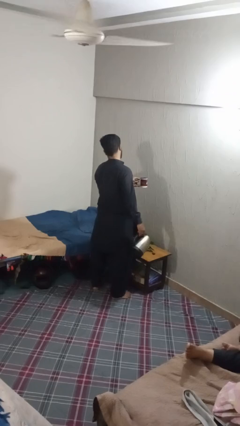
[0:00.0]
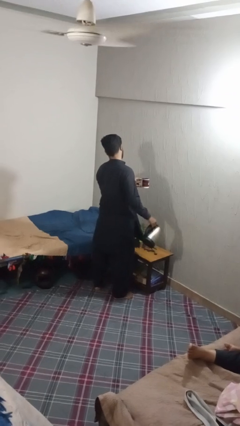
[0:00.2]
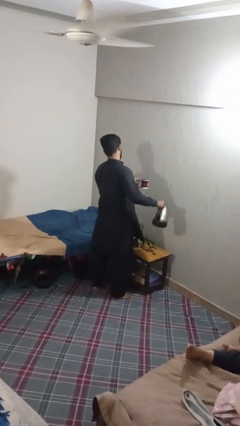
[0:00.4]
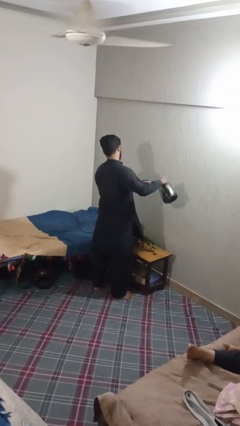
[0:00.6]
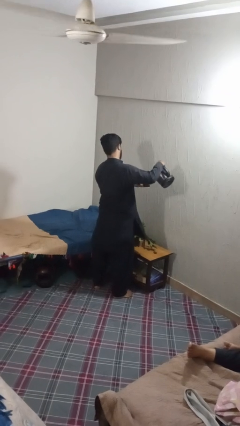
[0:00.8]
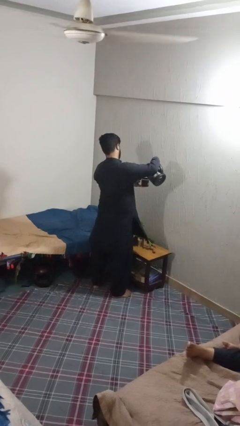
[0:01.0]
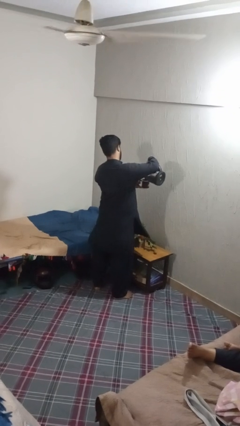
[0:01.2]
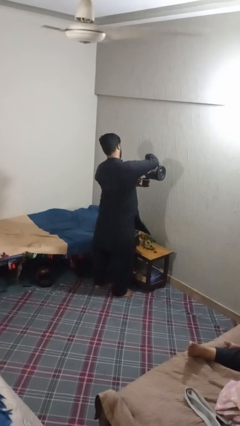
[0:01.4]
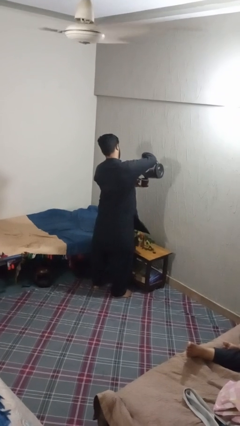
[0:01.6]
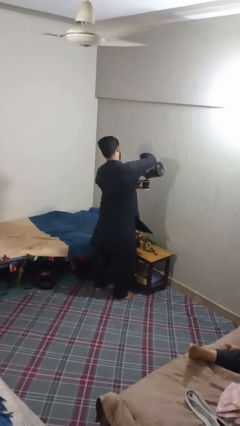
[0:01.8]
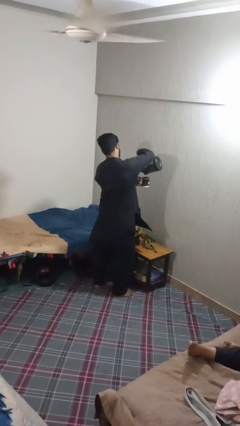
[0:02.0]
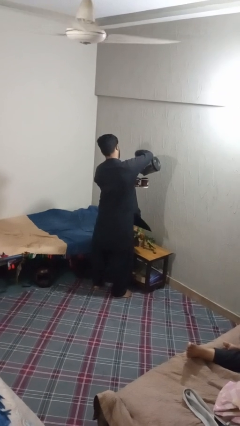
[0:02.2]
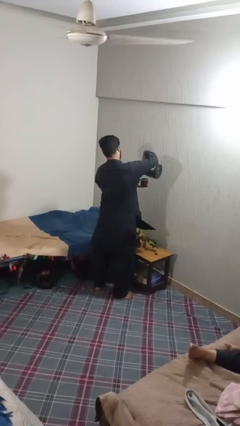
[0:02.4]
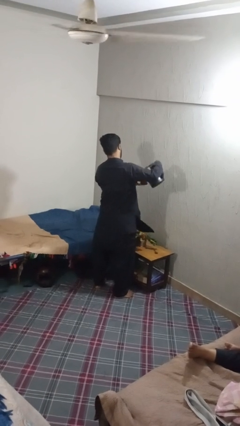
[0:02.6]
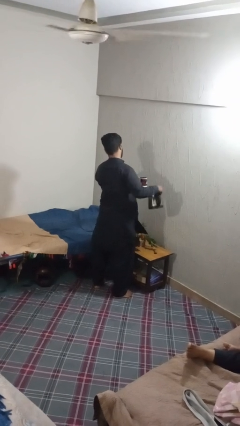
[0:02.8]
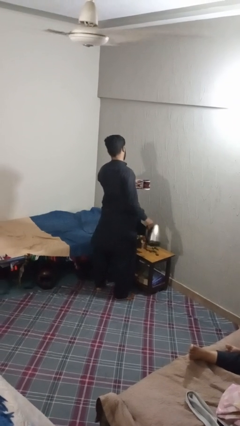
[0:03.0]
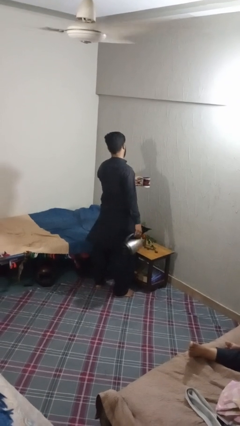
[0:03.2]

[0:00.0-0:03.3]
person pours coffee into mug

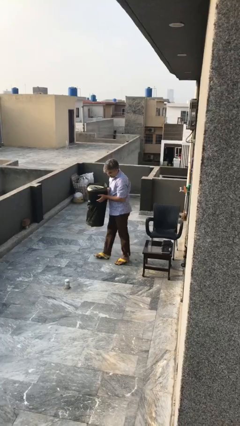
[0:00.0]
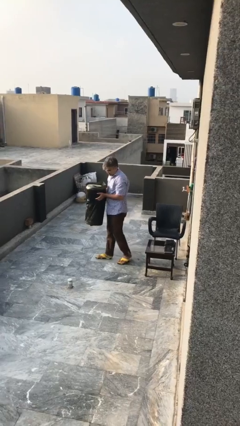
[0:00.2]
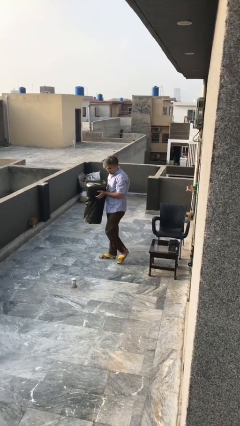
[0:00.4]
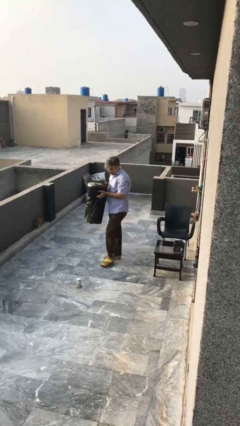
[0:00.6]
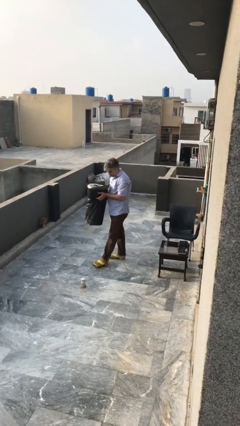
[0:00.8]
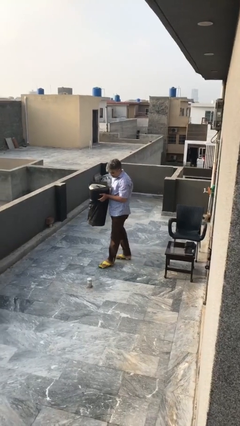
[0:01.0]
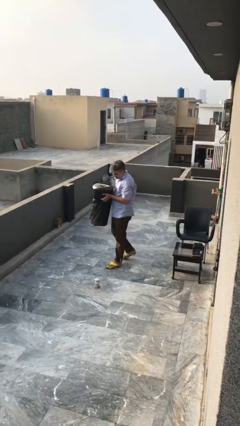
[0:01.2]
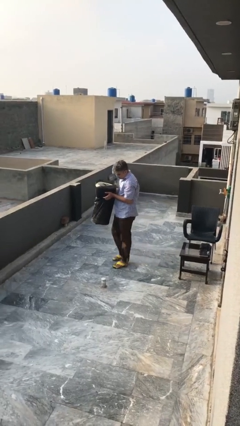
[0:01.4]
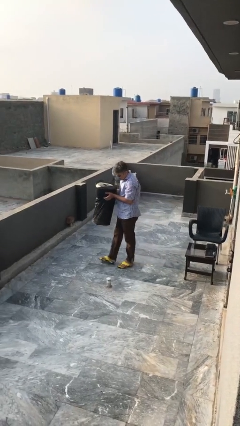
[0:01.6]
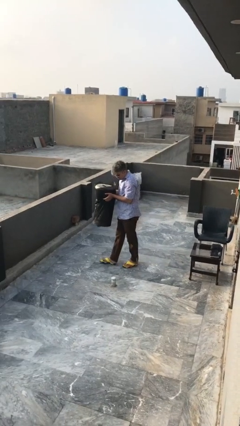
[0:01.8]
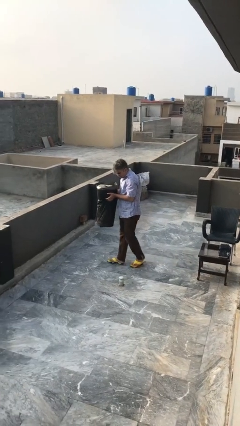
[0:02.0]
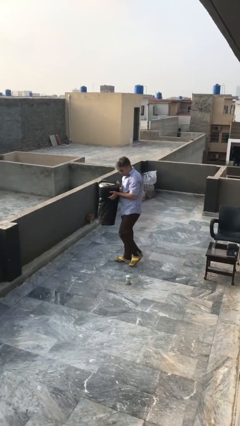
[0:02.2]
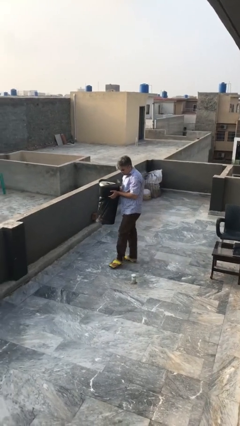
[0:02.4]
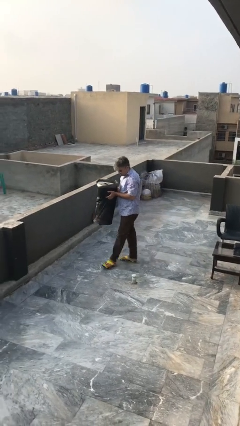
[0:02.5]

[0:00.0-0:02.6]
person carries heavy object

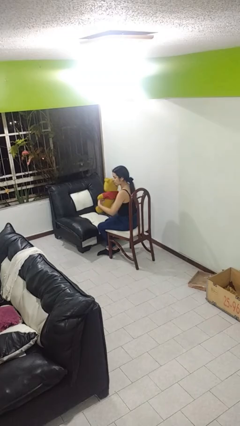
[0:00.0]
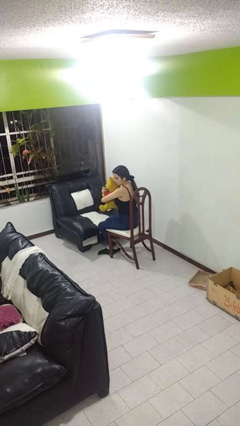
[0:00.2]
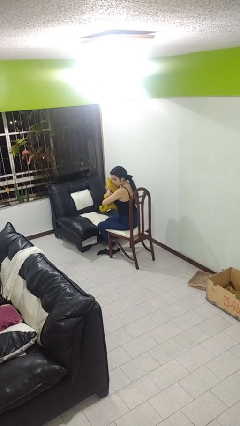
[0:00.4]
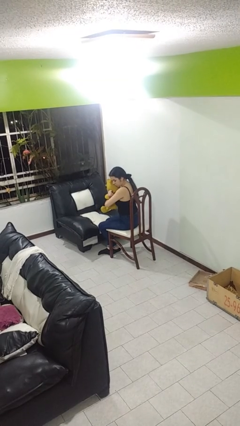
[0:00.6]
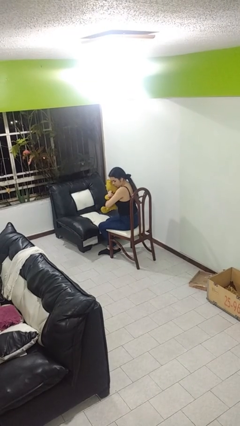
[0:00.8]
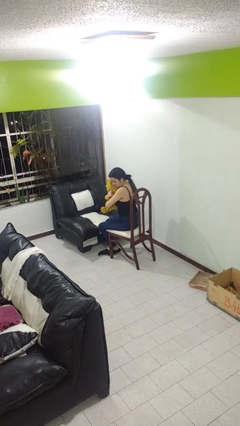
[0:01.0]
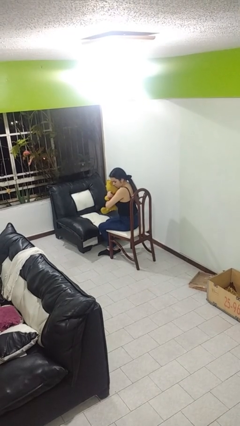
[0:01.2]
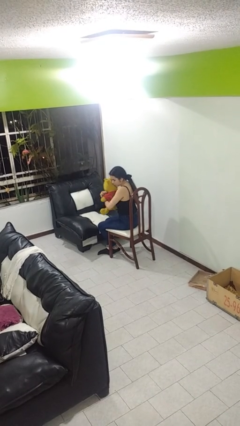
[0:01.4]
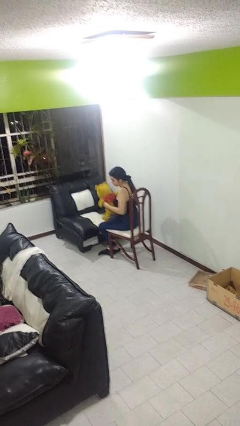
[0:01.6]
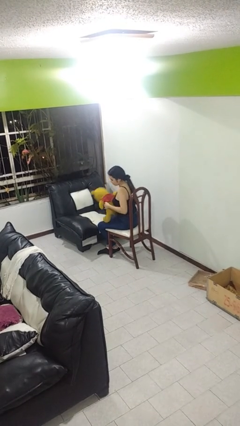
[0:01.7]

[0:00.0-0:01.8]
person hugs stuffed animal

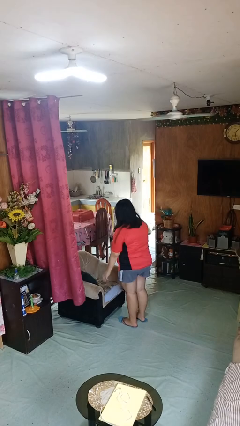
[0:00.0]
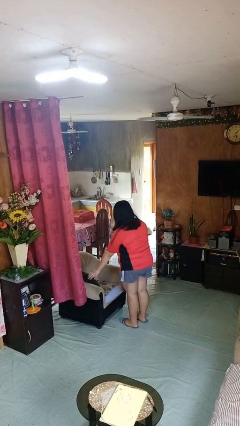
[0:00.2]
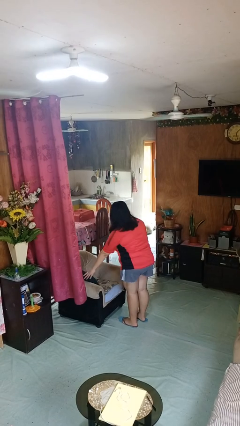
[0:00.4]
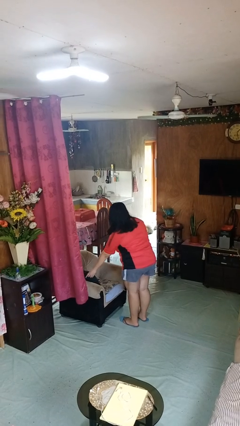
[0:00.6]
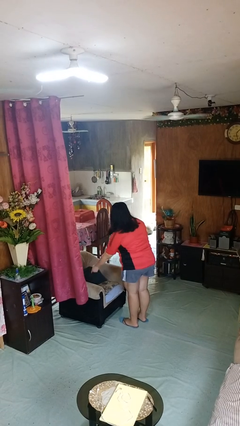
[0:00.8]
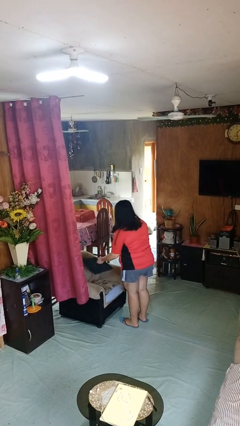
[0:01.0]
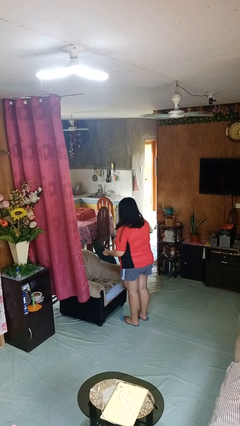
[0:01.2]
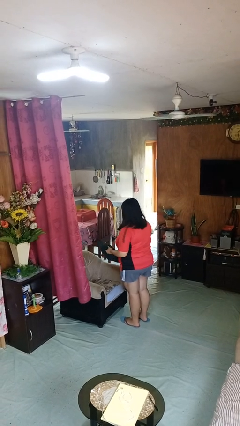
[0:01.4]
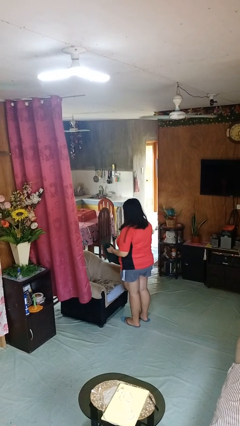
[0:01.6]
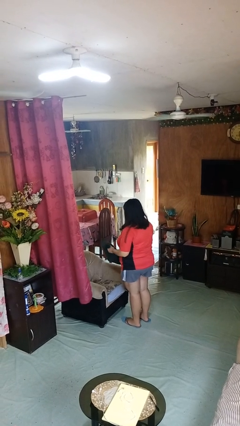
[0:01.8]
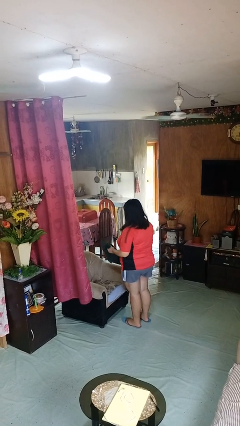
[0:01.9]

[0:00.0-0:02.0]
person picks up object from couch

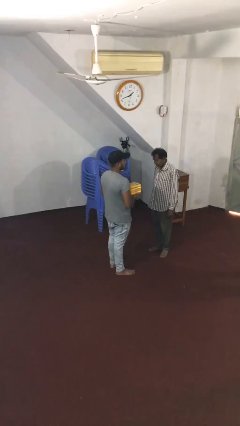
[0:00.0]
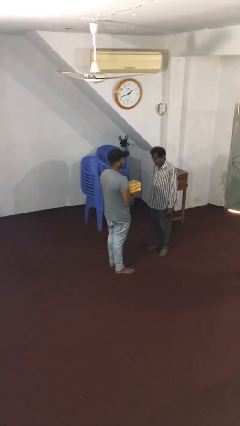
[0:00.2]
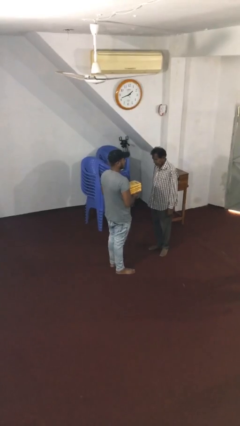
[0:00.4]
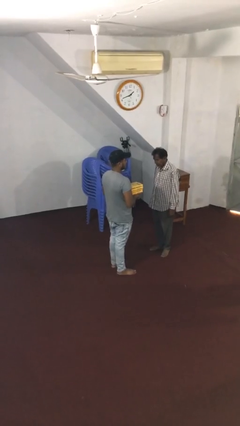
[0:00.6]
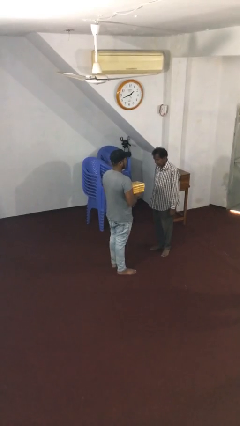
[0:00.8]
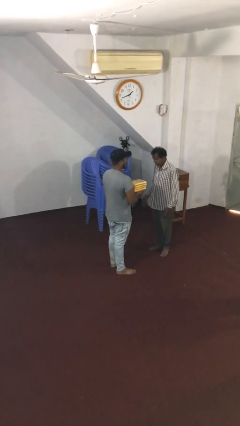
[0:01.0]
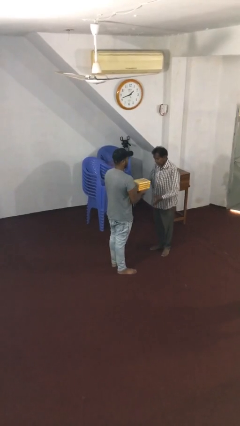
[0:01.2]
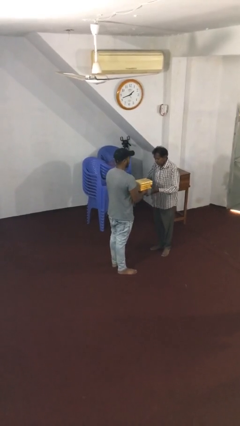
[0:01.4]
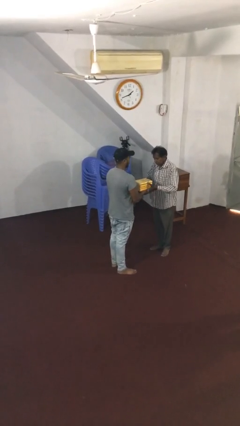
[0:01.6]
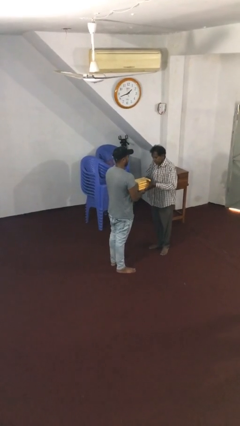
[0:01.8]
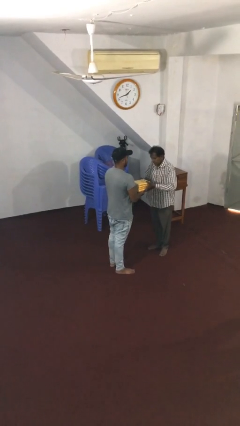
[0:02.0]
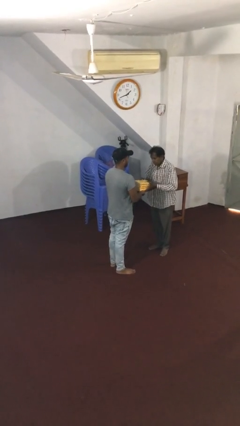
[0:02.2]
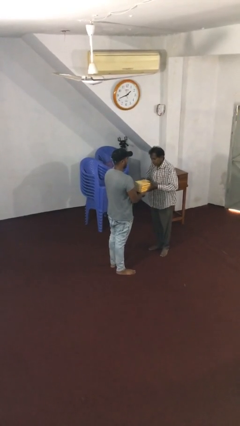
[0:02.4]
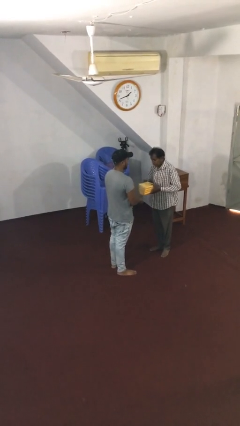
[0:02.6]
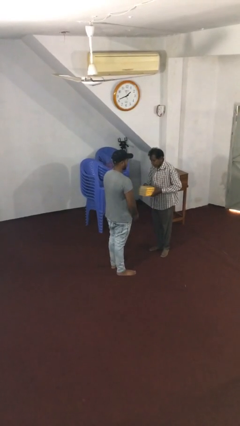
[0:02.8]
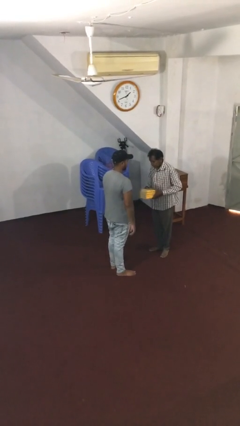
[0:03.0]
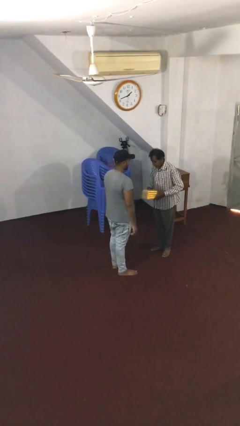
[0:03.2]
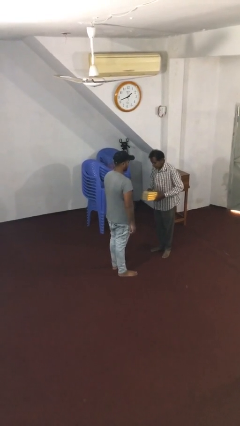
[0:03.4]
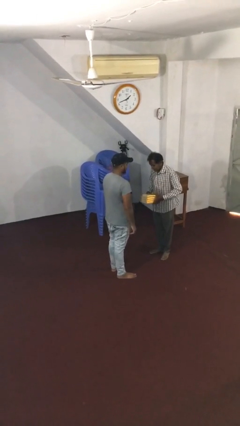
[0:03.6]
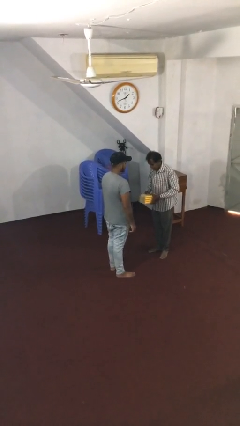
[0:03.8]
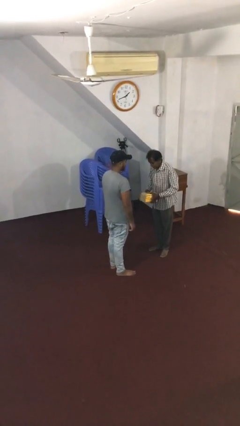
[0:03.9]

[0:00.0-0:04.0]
person transfers object to person

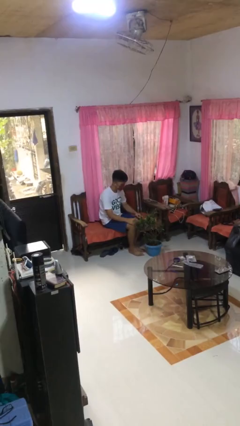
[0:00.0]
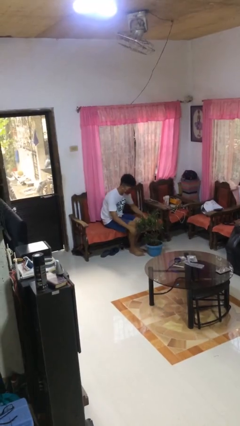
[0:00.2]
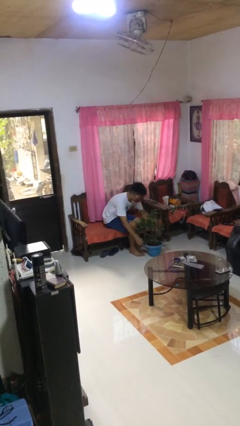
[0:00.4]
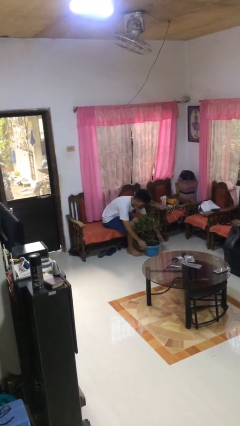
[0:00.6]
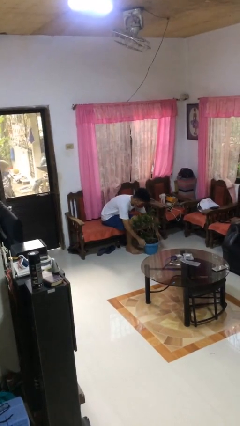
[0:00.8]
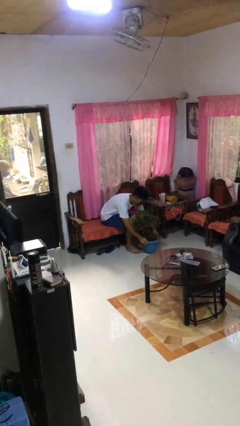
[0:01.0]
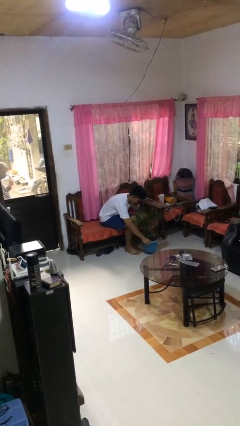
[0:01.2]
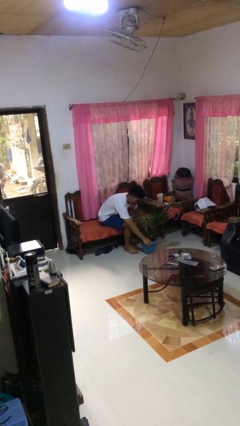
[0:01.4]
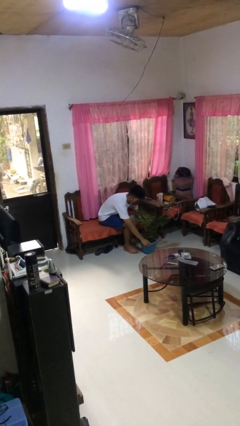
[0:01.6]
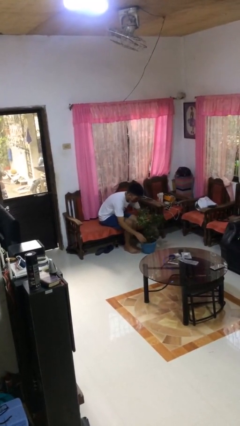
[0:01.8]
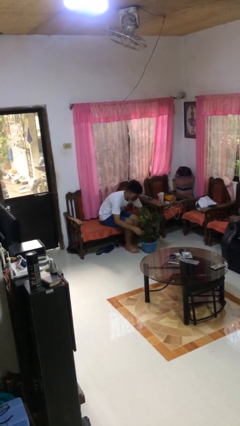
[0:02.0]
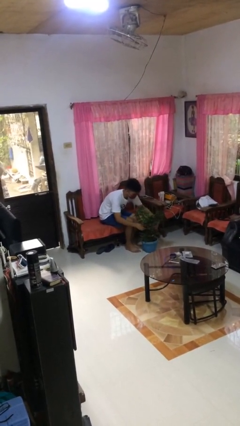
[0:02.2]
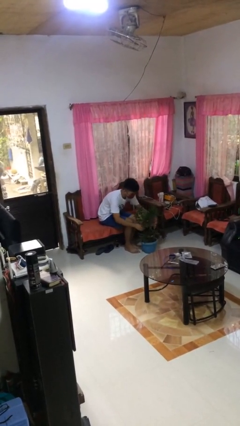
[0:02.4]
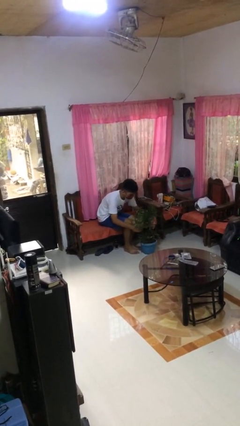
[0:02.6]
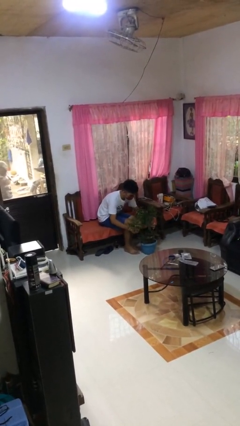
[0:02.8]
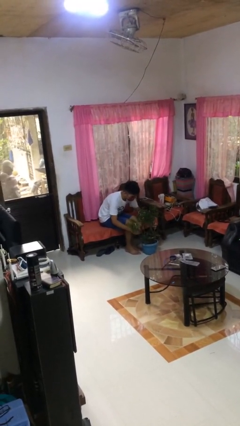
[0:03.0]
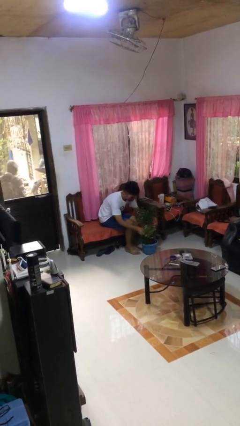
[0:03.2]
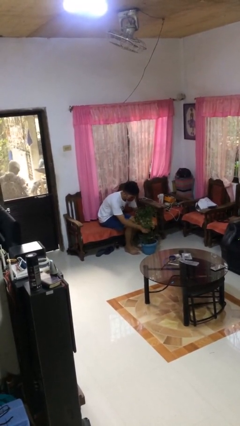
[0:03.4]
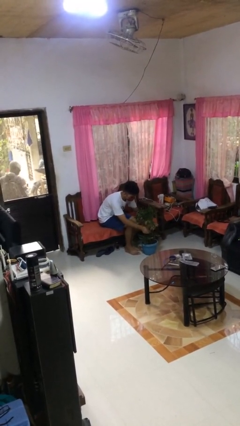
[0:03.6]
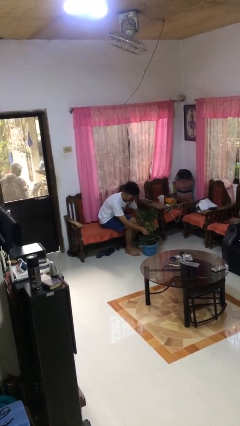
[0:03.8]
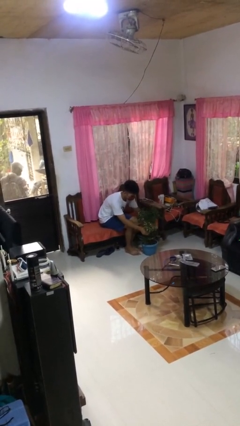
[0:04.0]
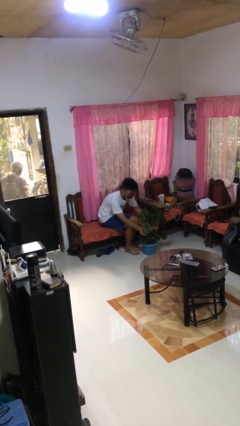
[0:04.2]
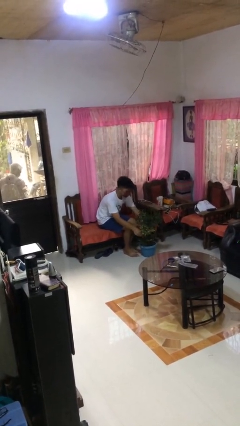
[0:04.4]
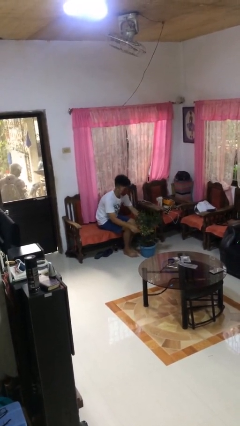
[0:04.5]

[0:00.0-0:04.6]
person arranges flowers in vase
